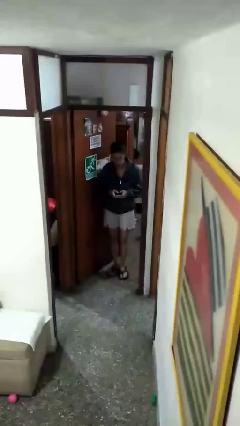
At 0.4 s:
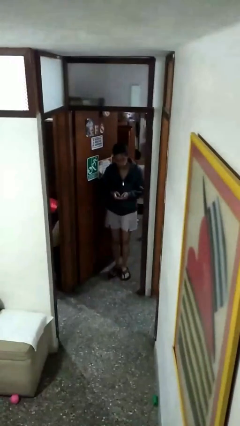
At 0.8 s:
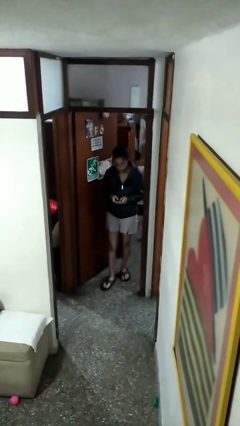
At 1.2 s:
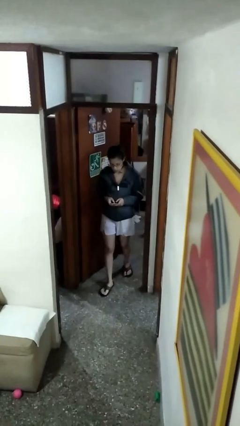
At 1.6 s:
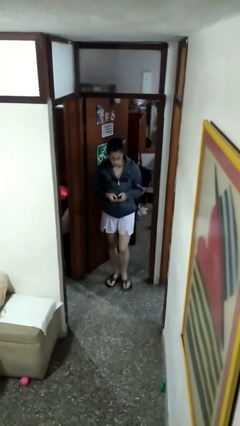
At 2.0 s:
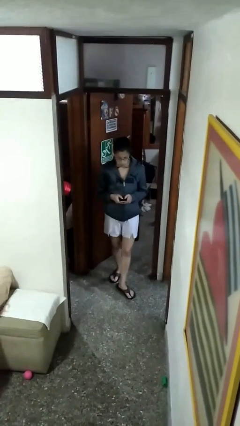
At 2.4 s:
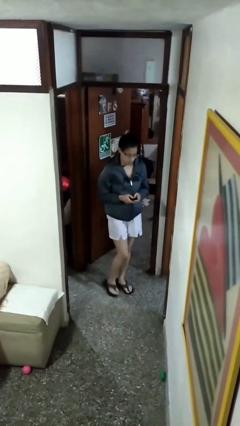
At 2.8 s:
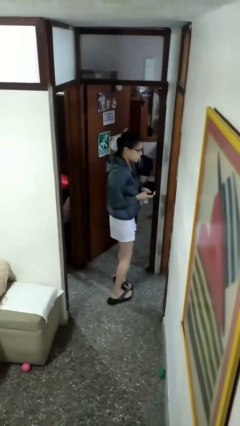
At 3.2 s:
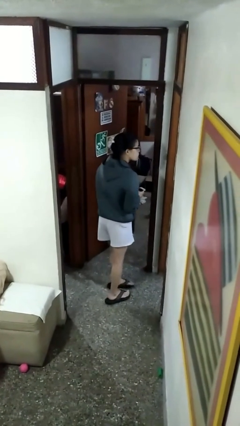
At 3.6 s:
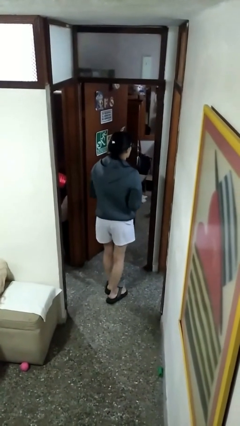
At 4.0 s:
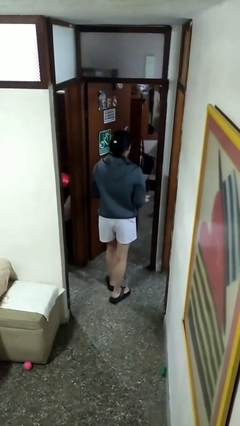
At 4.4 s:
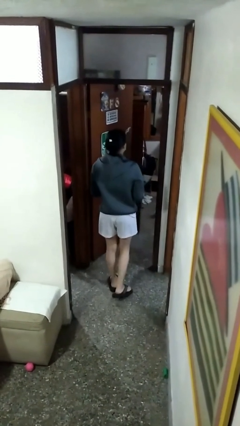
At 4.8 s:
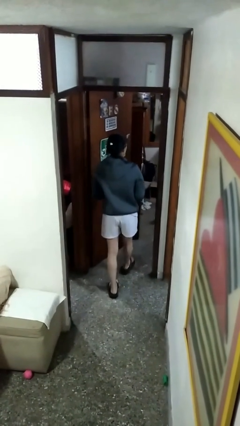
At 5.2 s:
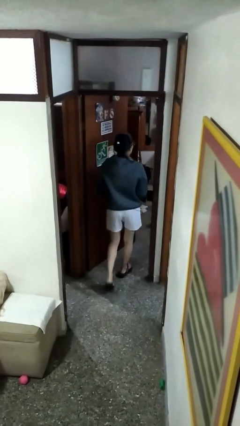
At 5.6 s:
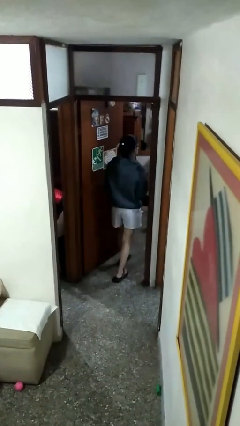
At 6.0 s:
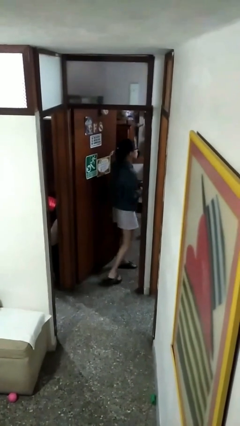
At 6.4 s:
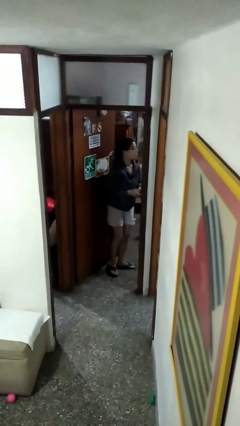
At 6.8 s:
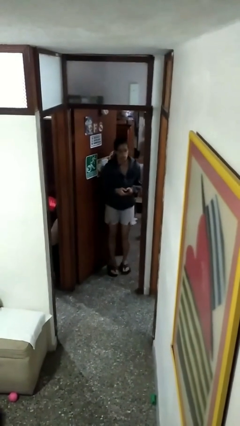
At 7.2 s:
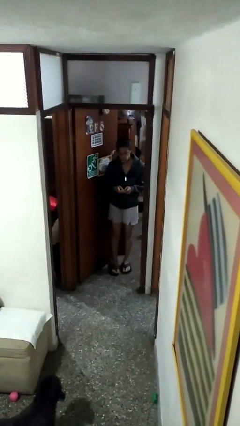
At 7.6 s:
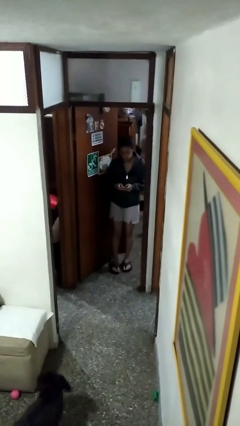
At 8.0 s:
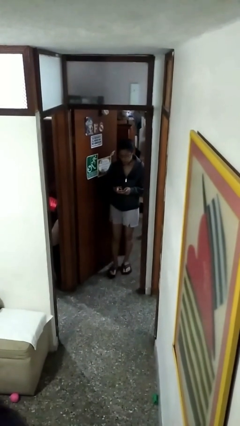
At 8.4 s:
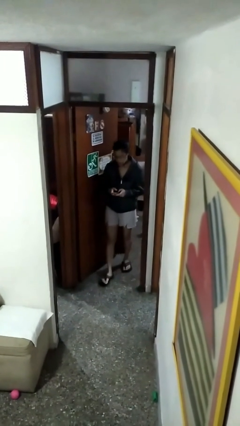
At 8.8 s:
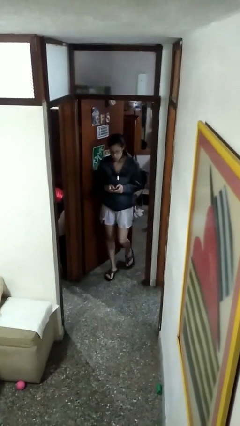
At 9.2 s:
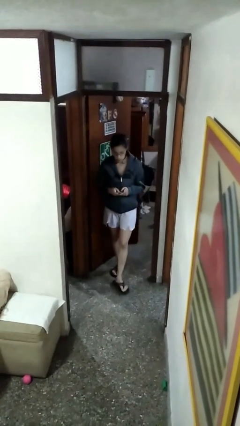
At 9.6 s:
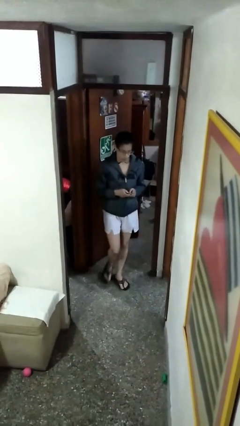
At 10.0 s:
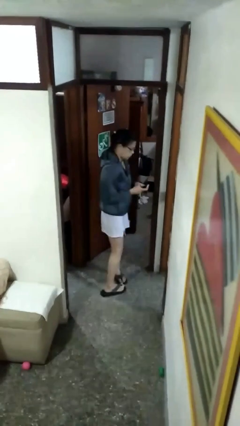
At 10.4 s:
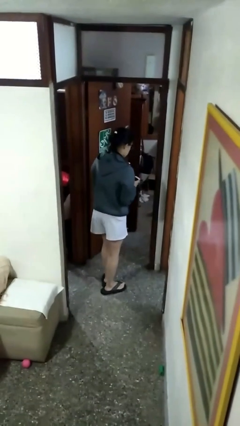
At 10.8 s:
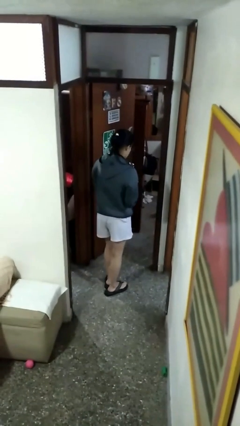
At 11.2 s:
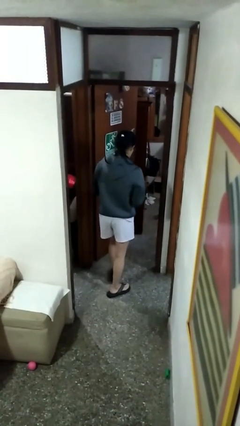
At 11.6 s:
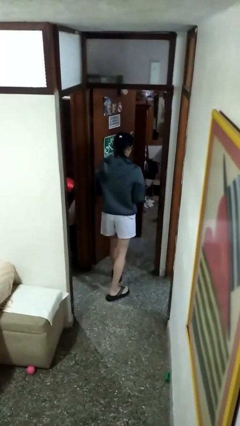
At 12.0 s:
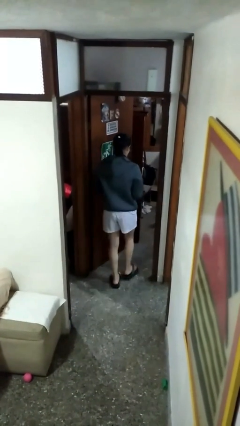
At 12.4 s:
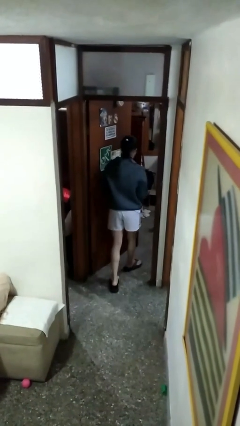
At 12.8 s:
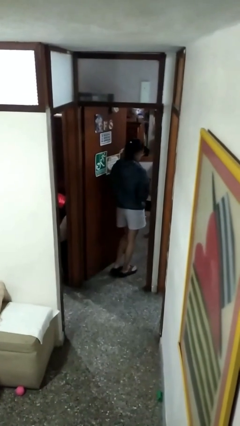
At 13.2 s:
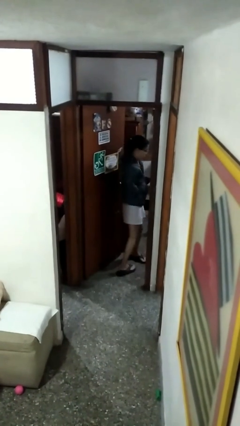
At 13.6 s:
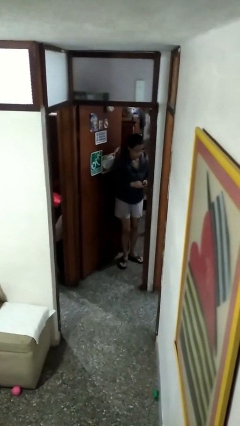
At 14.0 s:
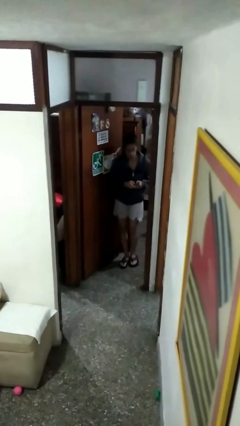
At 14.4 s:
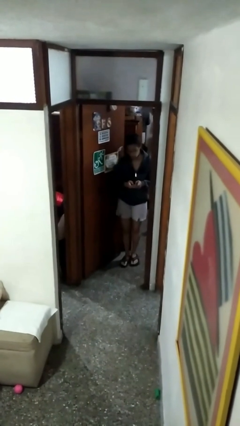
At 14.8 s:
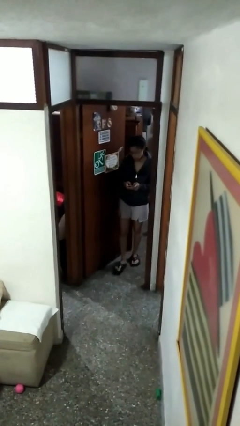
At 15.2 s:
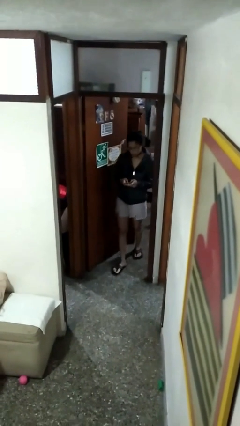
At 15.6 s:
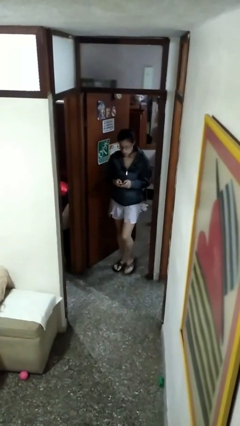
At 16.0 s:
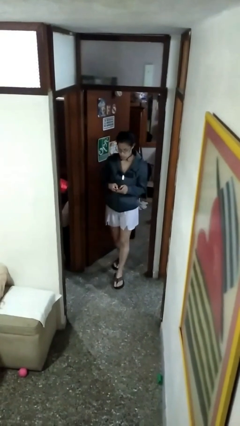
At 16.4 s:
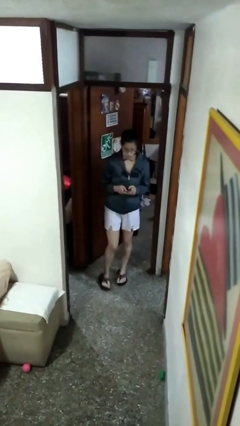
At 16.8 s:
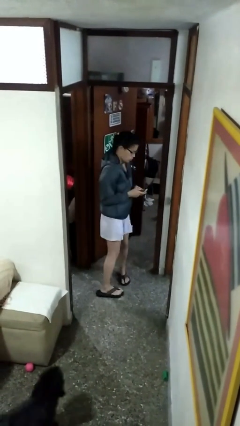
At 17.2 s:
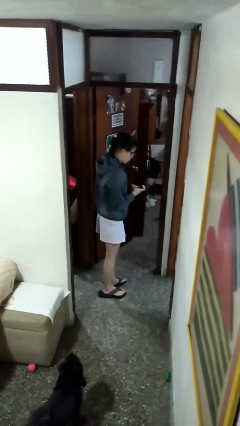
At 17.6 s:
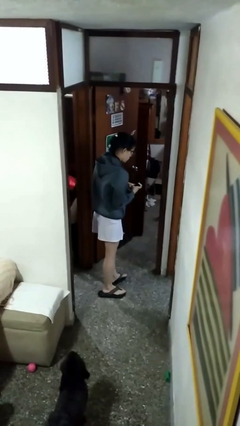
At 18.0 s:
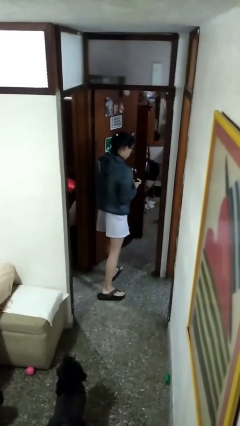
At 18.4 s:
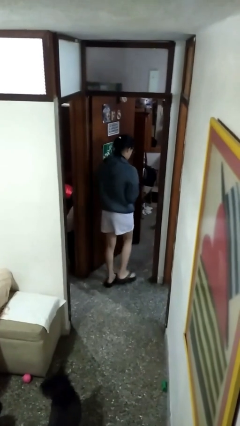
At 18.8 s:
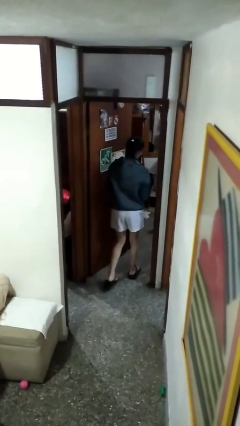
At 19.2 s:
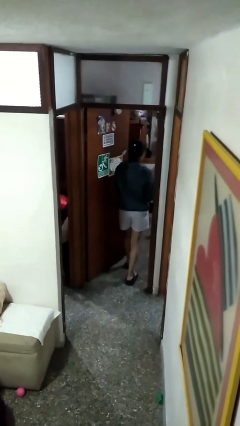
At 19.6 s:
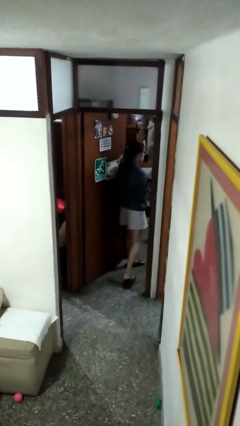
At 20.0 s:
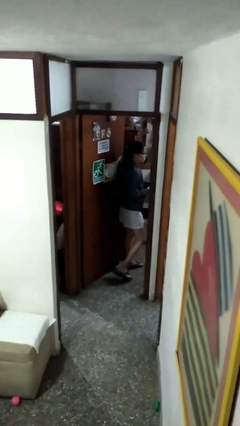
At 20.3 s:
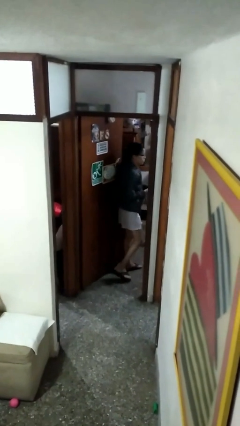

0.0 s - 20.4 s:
person texts on phone

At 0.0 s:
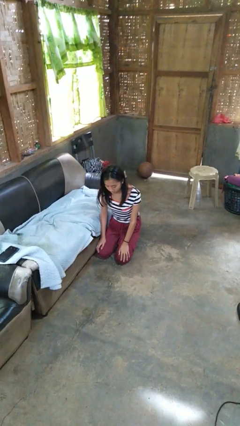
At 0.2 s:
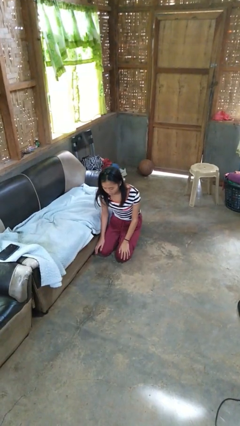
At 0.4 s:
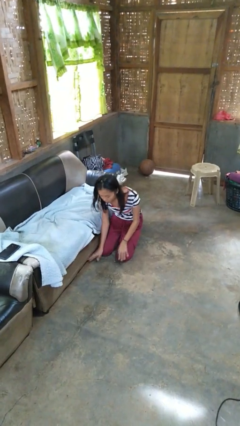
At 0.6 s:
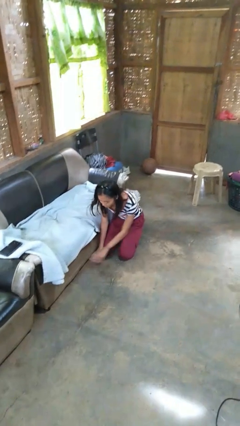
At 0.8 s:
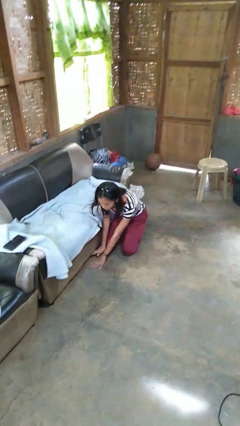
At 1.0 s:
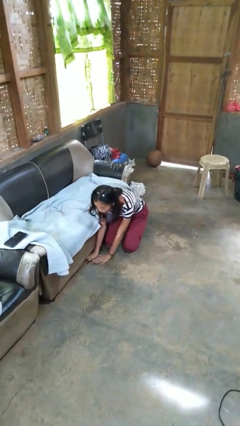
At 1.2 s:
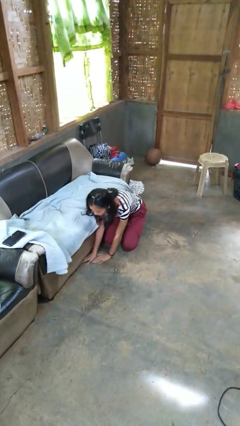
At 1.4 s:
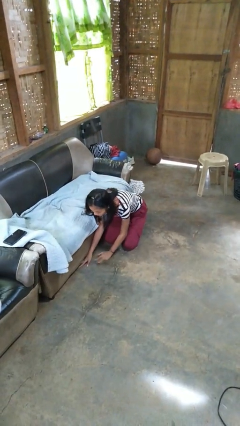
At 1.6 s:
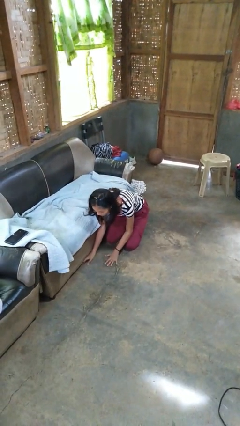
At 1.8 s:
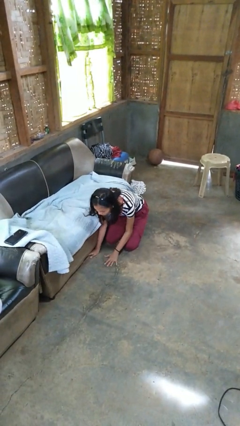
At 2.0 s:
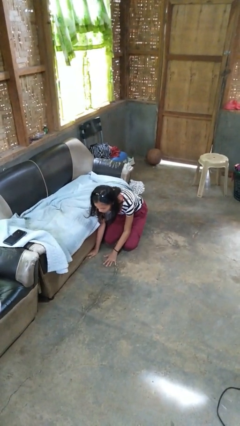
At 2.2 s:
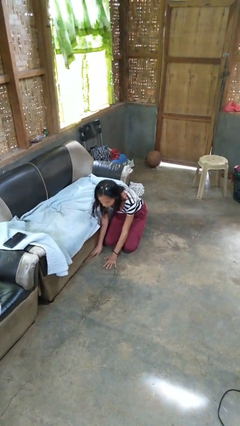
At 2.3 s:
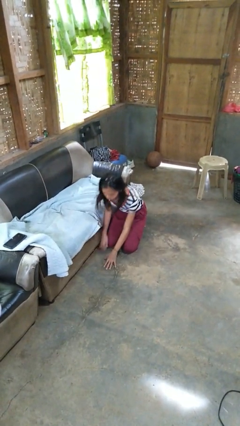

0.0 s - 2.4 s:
person searches under couch

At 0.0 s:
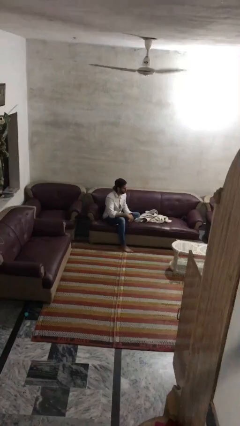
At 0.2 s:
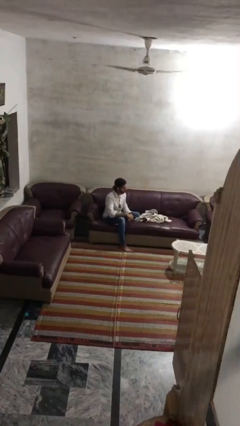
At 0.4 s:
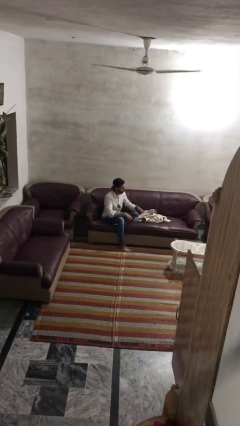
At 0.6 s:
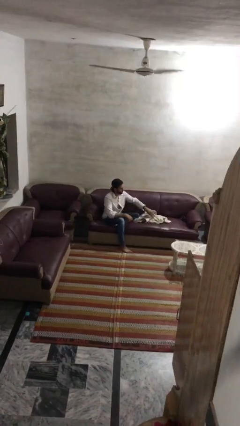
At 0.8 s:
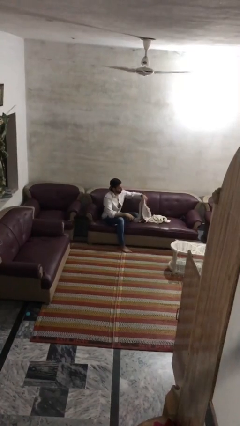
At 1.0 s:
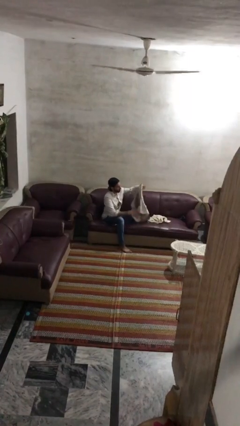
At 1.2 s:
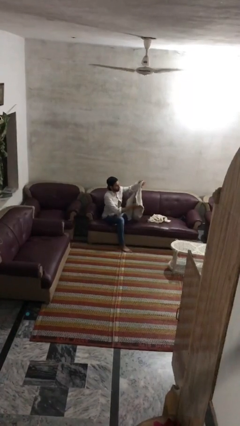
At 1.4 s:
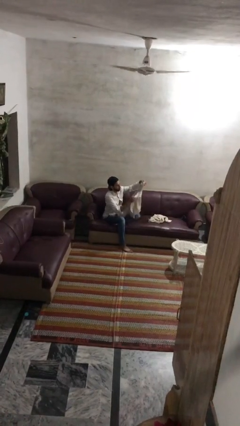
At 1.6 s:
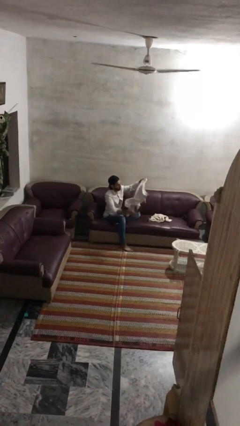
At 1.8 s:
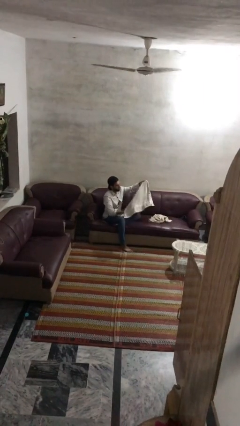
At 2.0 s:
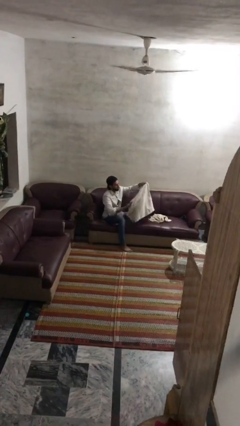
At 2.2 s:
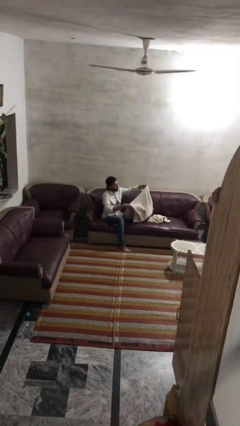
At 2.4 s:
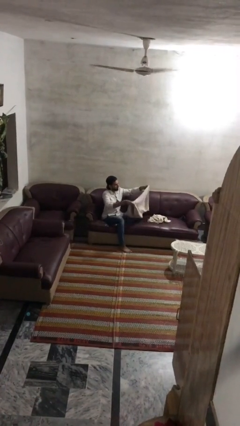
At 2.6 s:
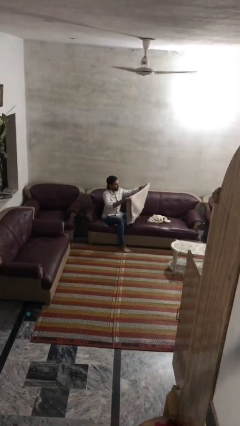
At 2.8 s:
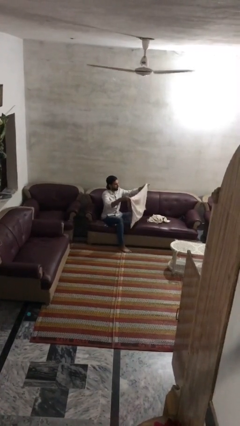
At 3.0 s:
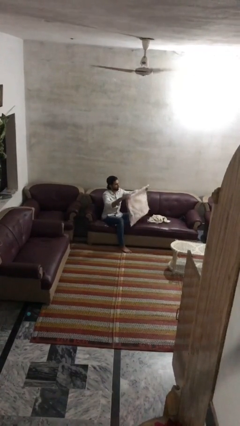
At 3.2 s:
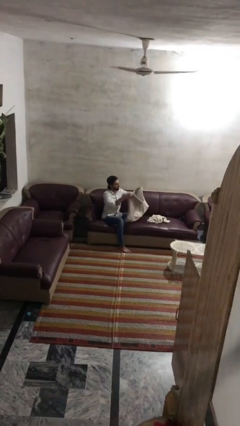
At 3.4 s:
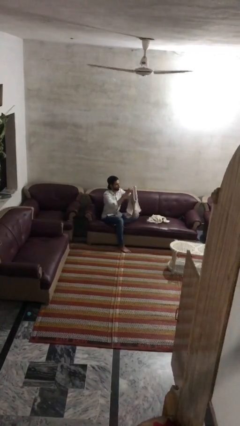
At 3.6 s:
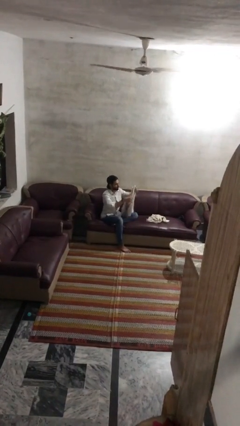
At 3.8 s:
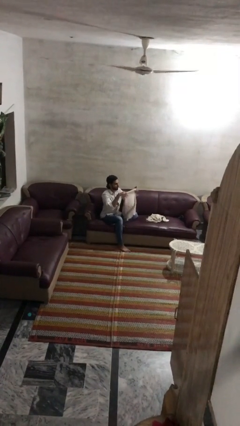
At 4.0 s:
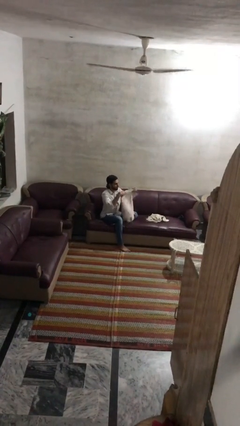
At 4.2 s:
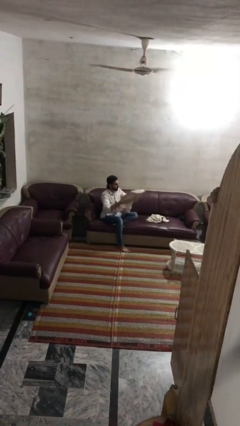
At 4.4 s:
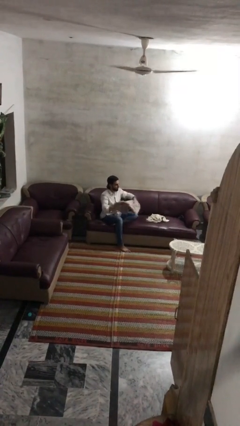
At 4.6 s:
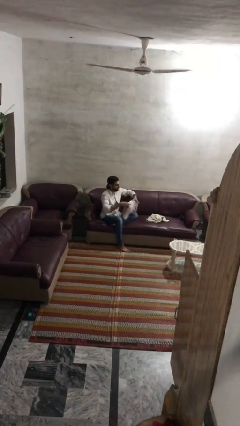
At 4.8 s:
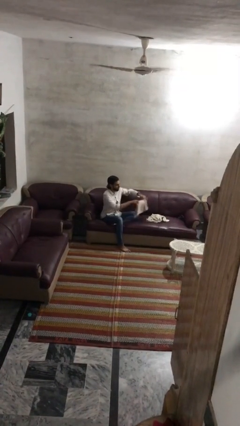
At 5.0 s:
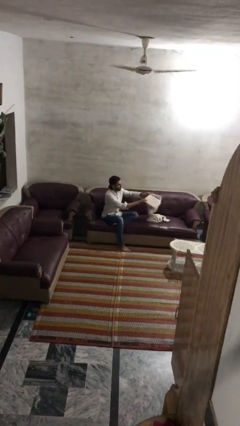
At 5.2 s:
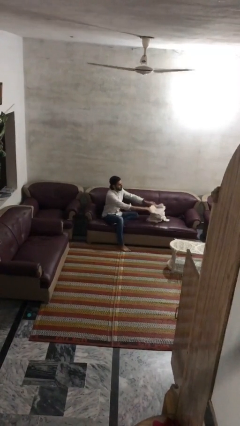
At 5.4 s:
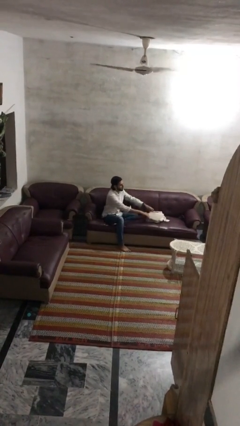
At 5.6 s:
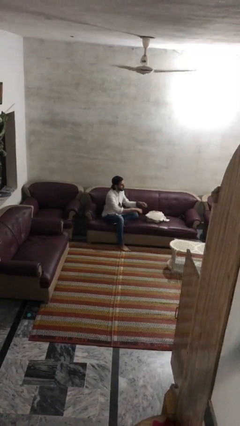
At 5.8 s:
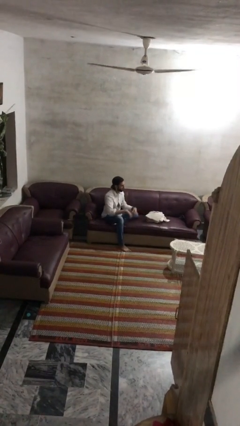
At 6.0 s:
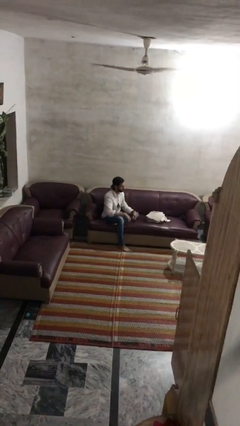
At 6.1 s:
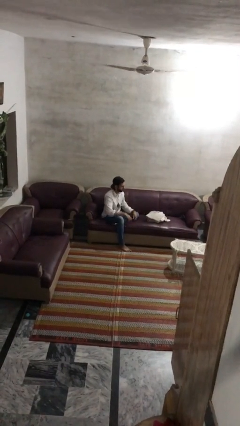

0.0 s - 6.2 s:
person folds towel
